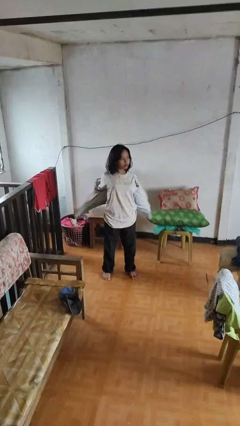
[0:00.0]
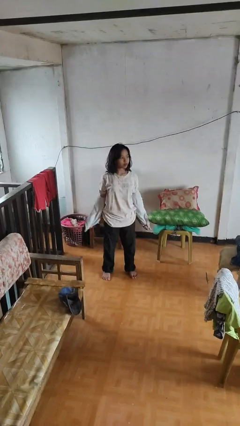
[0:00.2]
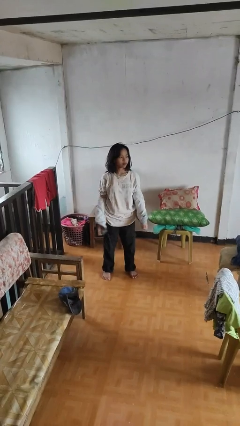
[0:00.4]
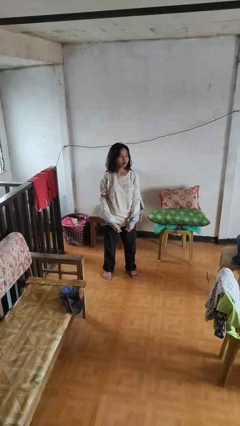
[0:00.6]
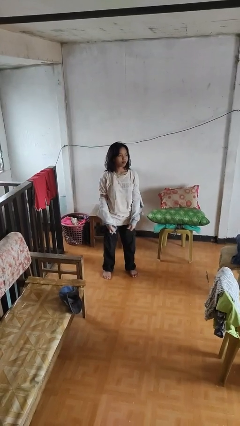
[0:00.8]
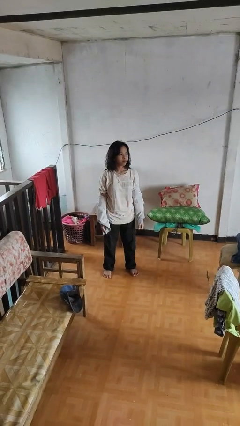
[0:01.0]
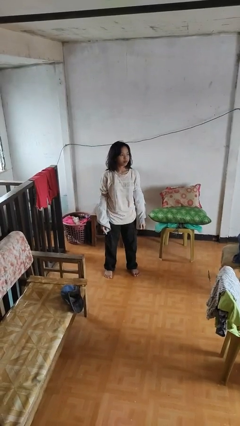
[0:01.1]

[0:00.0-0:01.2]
person takes off jacket

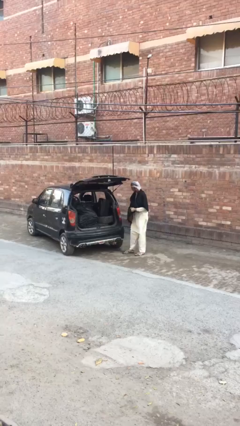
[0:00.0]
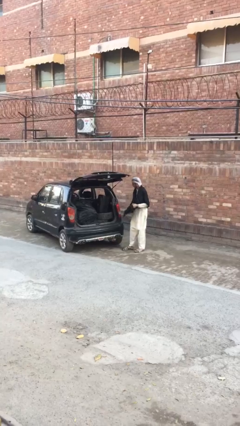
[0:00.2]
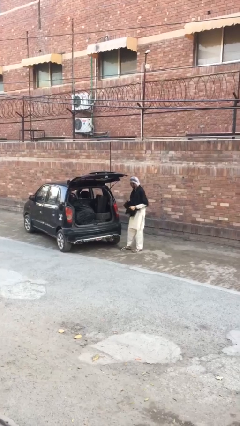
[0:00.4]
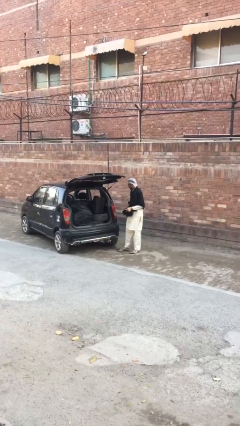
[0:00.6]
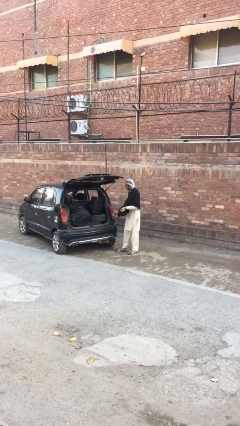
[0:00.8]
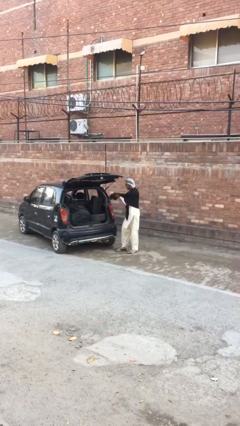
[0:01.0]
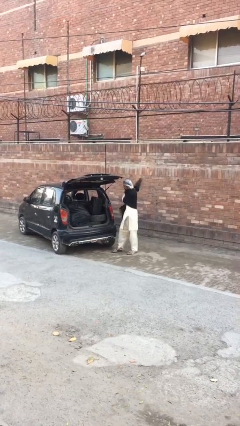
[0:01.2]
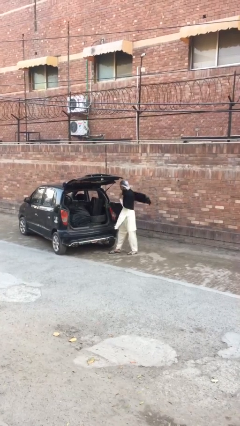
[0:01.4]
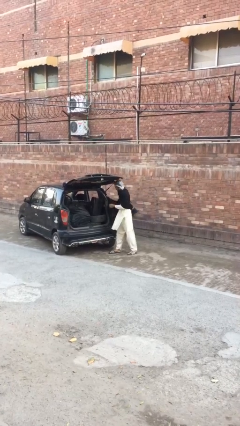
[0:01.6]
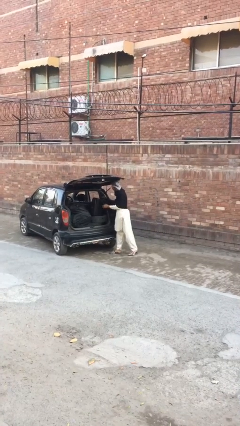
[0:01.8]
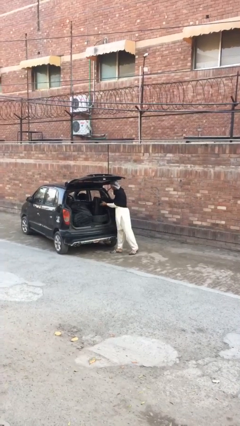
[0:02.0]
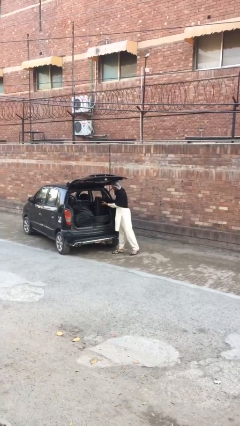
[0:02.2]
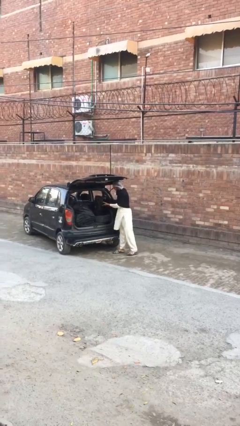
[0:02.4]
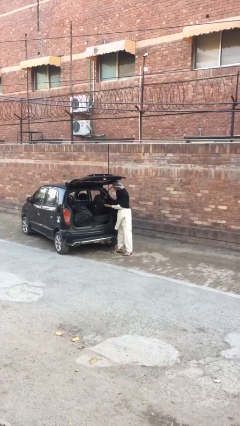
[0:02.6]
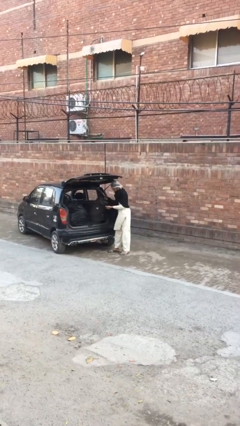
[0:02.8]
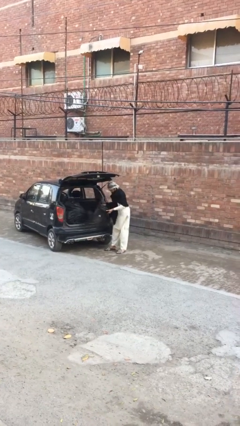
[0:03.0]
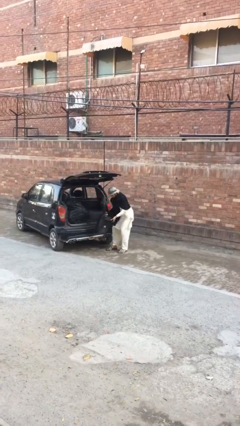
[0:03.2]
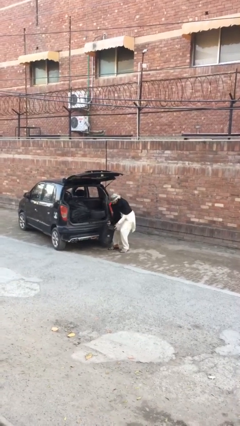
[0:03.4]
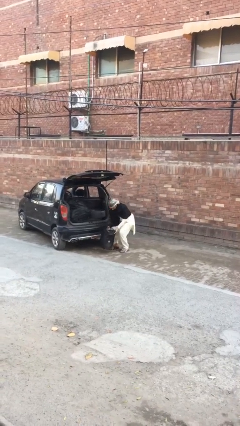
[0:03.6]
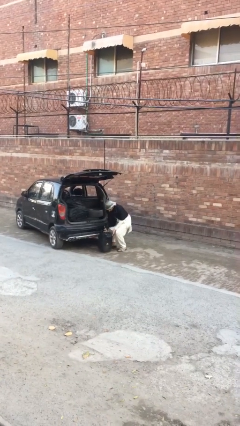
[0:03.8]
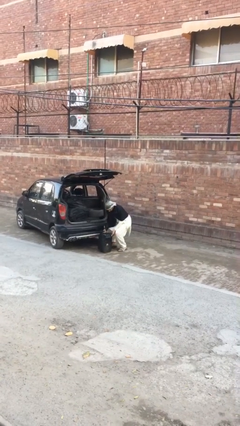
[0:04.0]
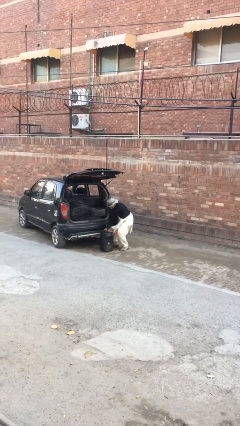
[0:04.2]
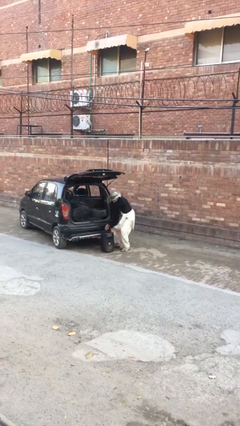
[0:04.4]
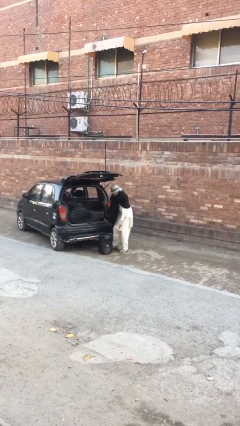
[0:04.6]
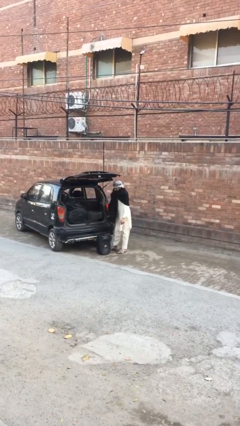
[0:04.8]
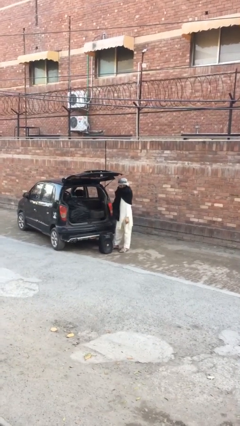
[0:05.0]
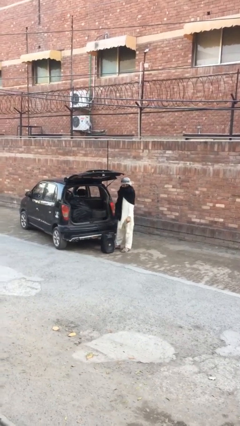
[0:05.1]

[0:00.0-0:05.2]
person unloads car

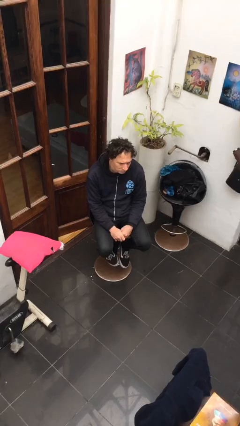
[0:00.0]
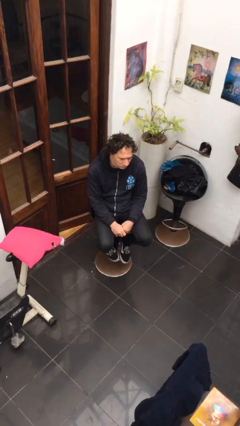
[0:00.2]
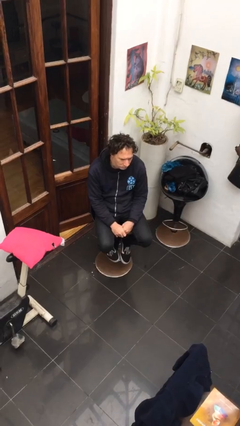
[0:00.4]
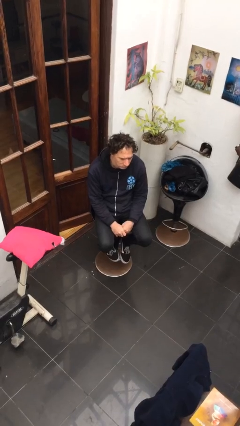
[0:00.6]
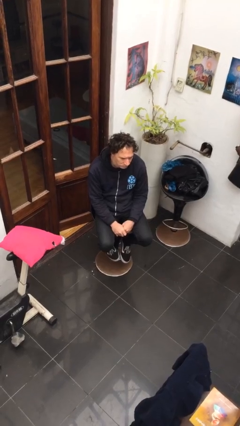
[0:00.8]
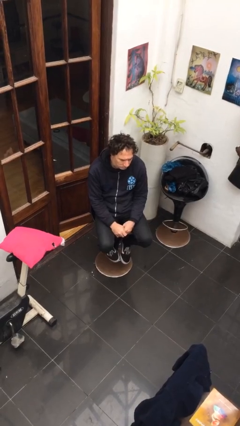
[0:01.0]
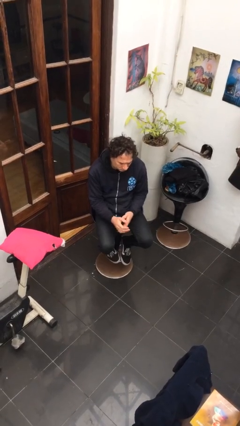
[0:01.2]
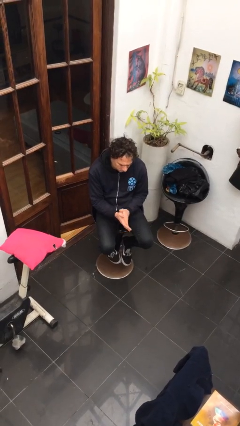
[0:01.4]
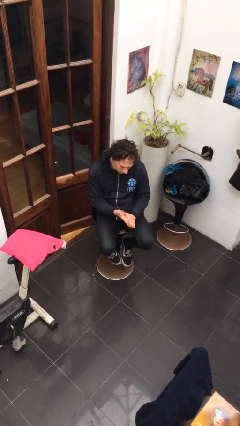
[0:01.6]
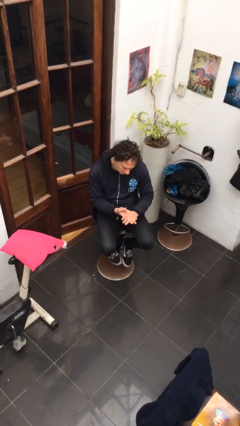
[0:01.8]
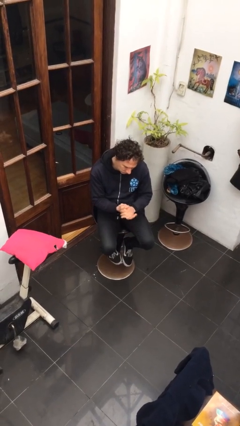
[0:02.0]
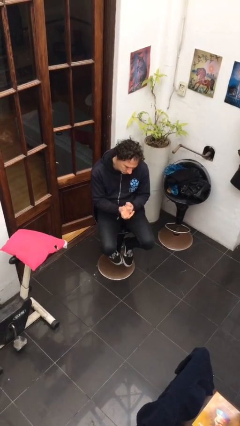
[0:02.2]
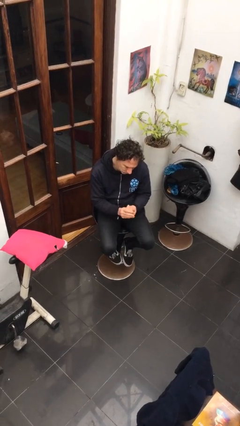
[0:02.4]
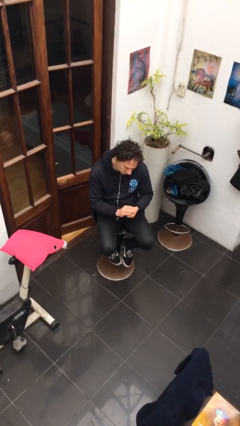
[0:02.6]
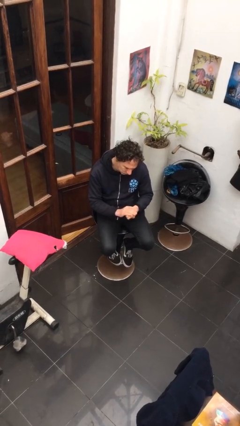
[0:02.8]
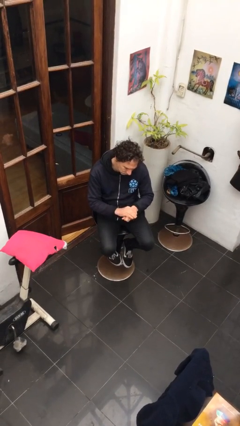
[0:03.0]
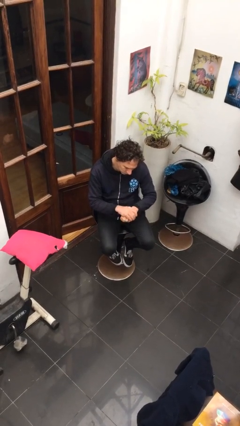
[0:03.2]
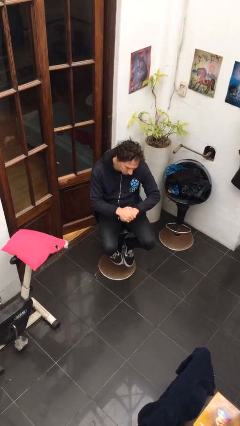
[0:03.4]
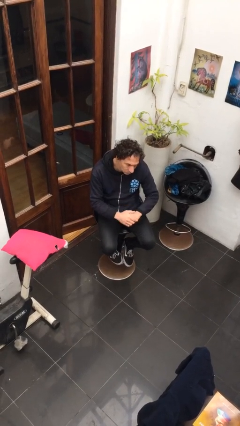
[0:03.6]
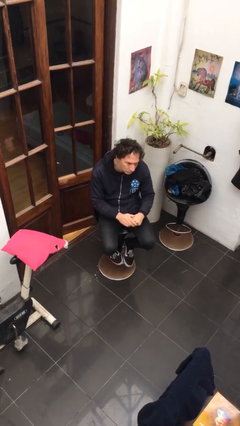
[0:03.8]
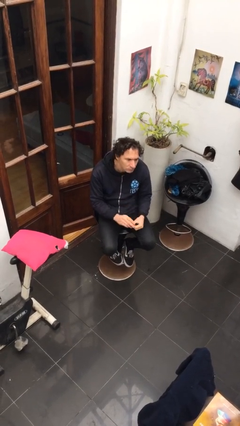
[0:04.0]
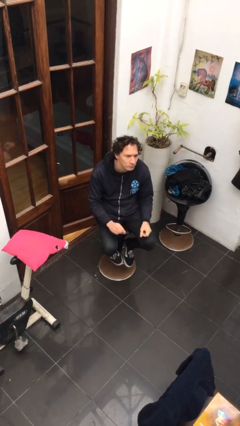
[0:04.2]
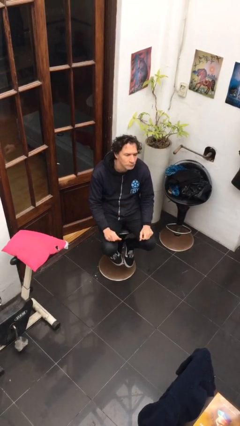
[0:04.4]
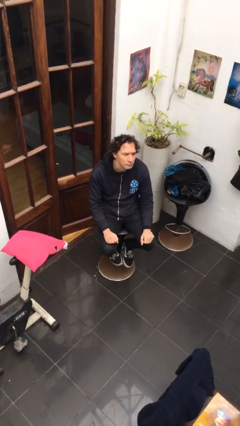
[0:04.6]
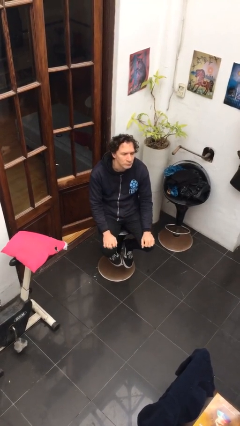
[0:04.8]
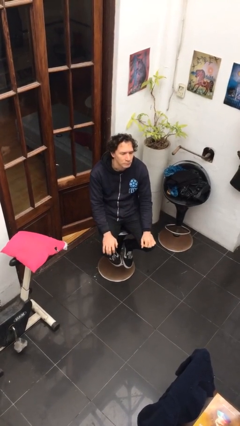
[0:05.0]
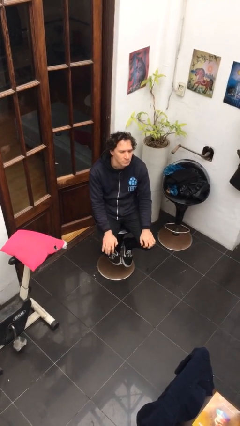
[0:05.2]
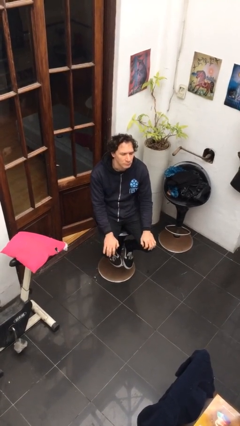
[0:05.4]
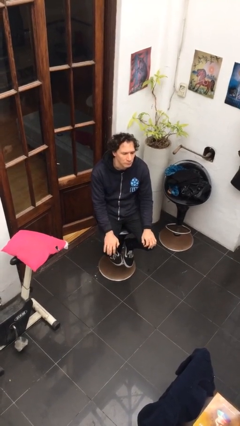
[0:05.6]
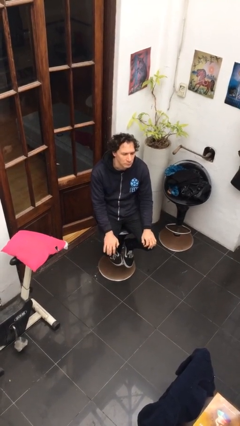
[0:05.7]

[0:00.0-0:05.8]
person looks at hands in lap

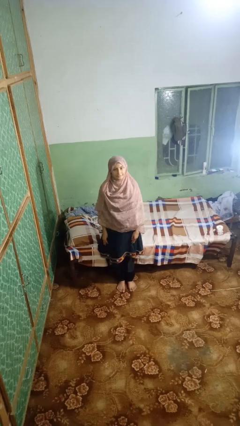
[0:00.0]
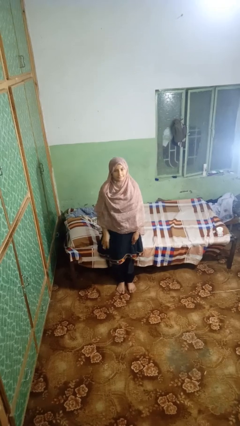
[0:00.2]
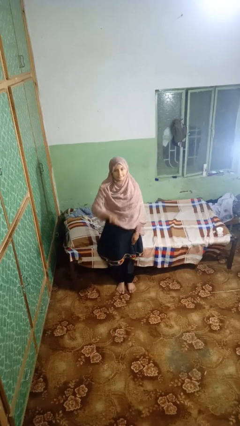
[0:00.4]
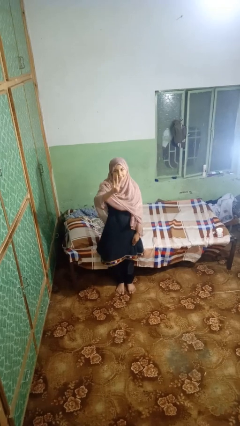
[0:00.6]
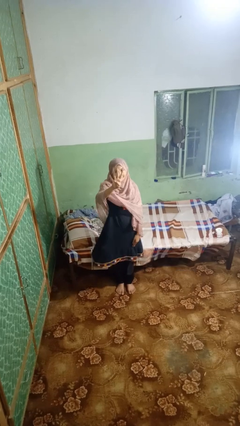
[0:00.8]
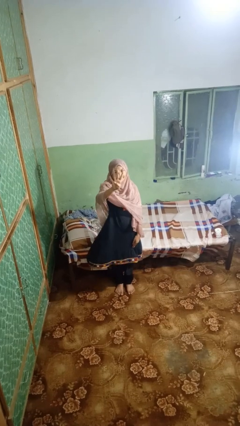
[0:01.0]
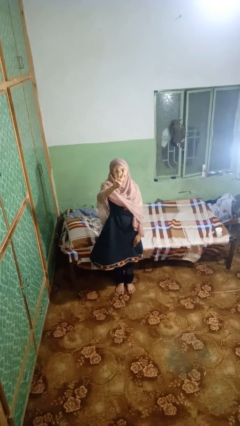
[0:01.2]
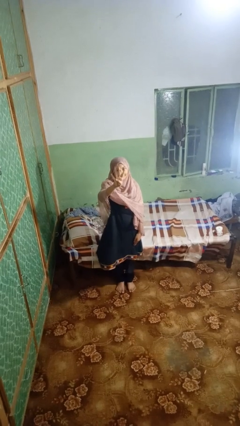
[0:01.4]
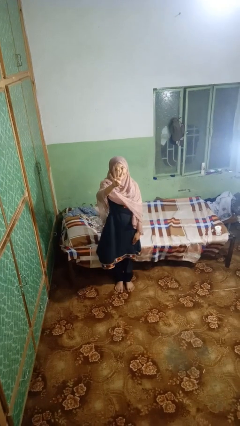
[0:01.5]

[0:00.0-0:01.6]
person gestures number four

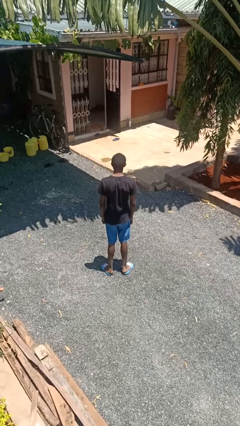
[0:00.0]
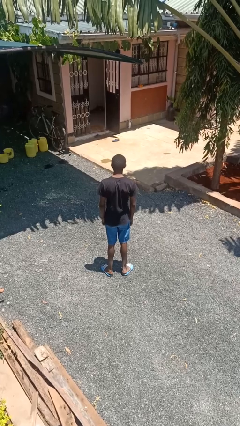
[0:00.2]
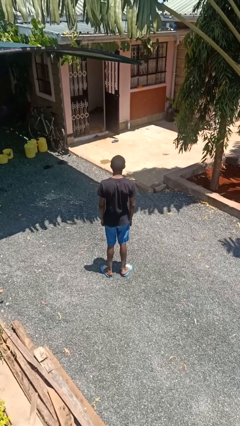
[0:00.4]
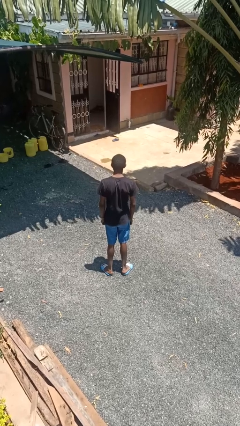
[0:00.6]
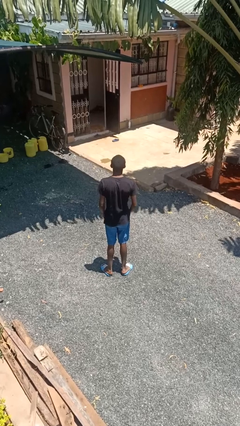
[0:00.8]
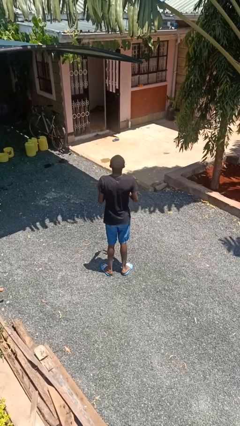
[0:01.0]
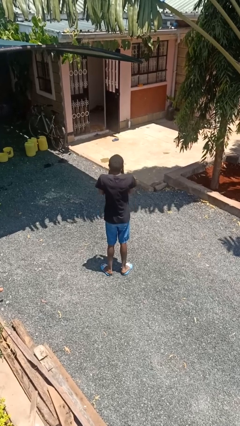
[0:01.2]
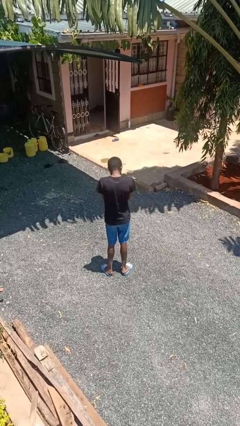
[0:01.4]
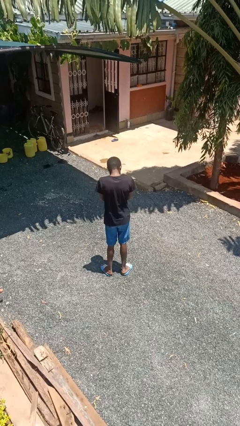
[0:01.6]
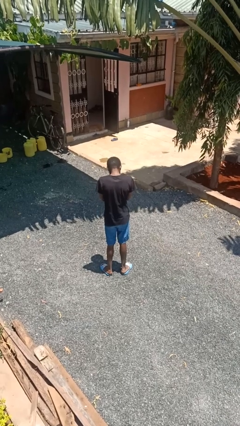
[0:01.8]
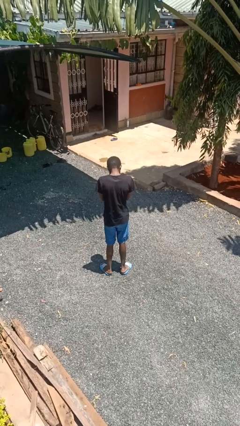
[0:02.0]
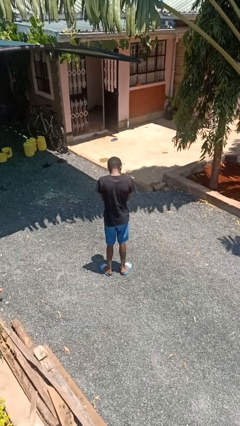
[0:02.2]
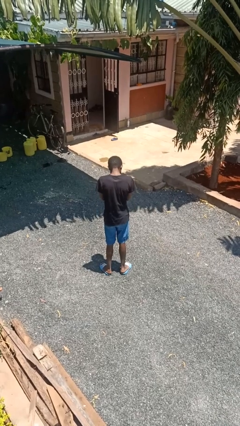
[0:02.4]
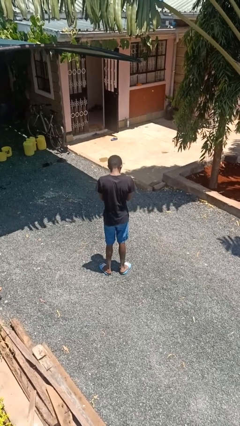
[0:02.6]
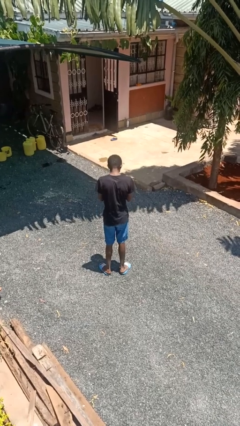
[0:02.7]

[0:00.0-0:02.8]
person sneezes into hand

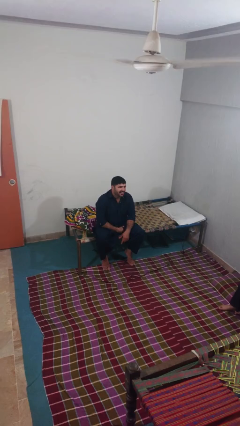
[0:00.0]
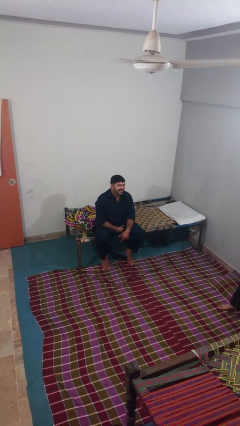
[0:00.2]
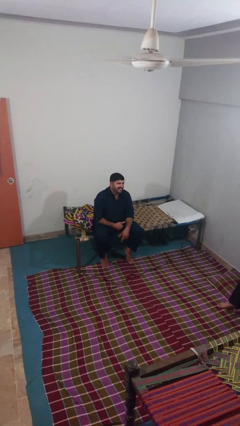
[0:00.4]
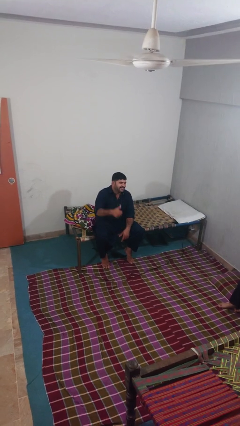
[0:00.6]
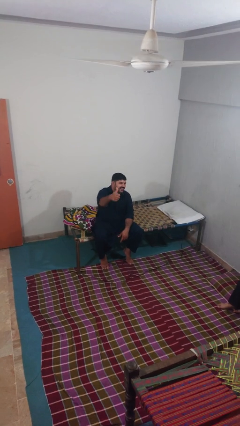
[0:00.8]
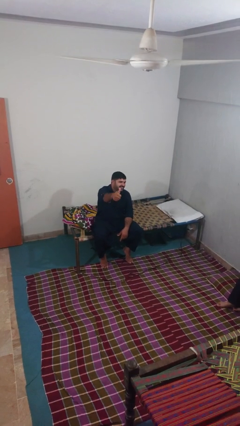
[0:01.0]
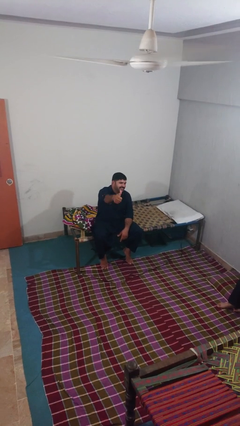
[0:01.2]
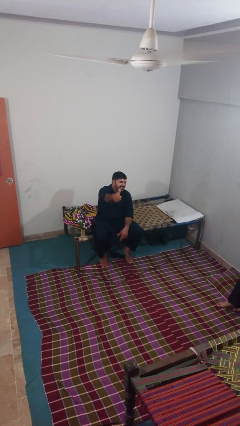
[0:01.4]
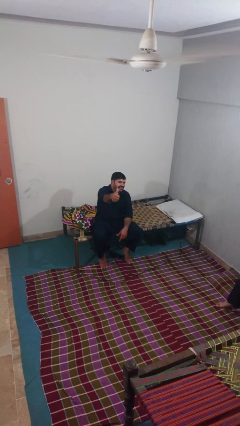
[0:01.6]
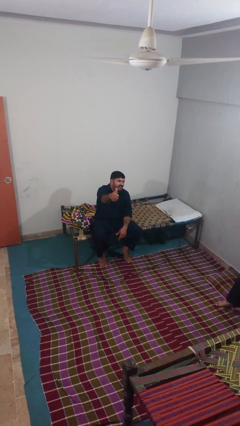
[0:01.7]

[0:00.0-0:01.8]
person gestures thumbs up
